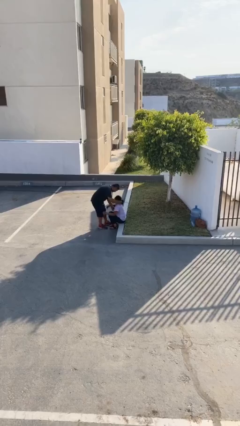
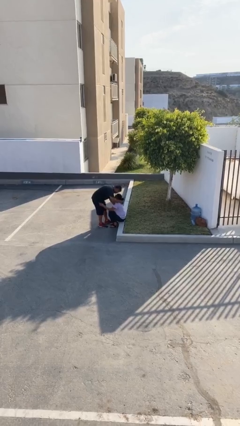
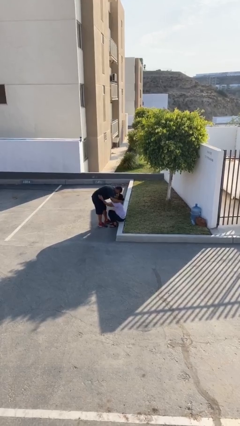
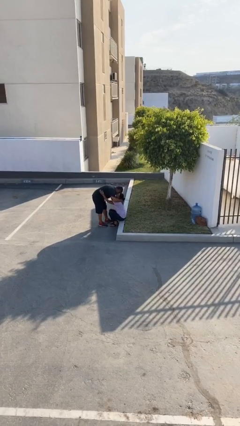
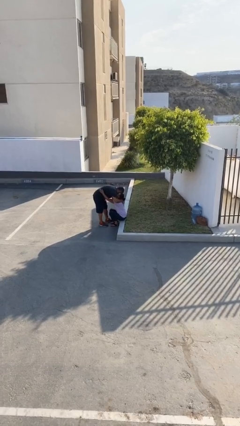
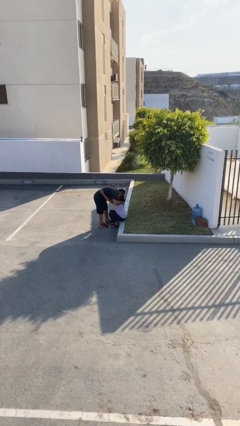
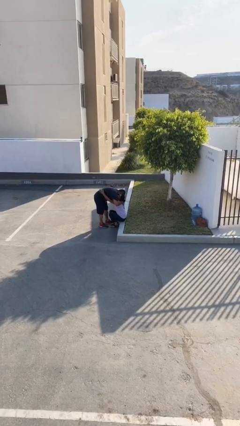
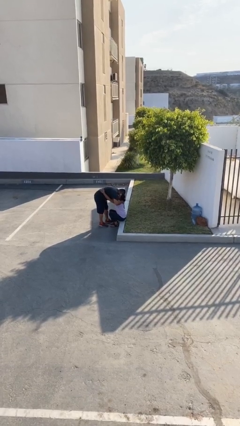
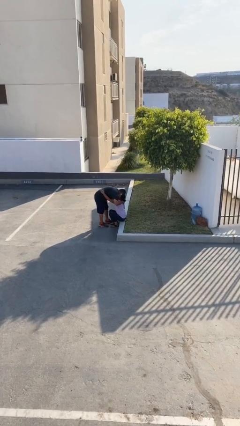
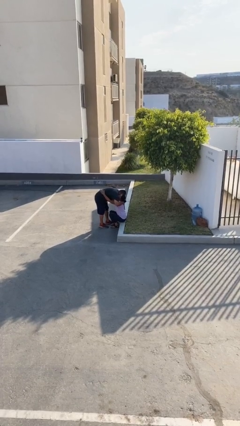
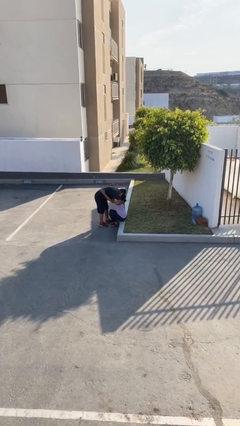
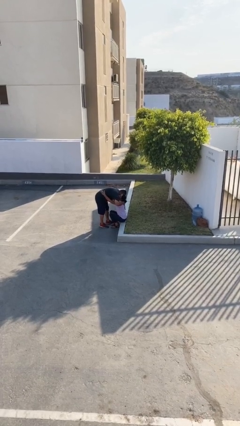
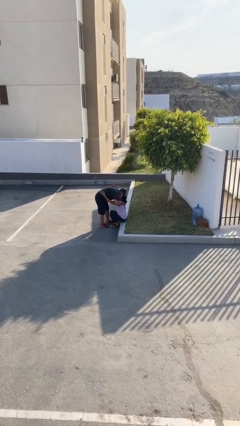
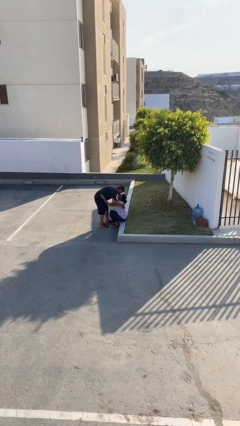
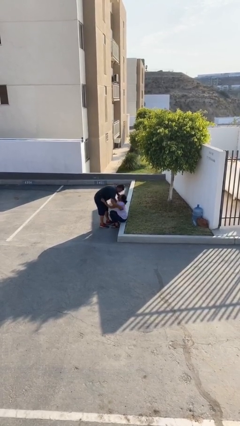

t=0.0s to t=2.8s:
person embraces person

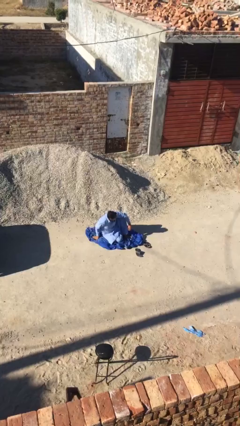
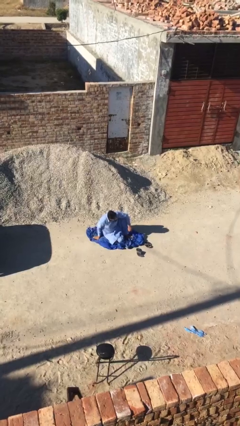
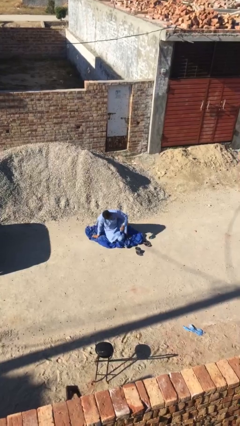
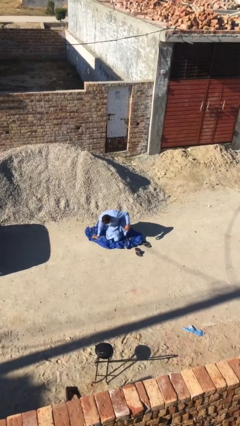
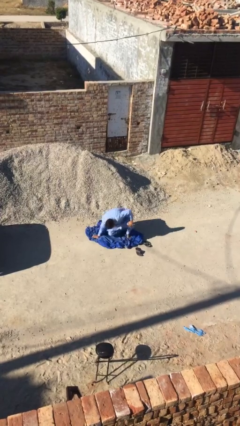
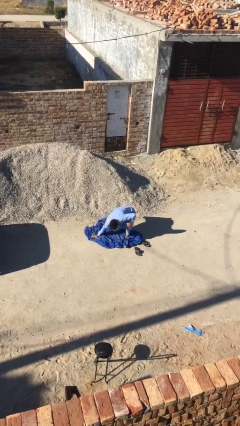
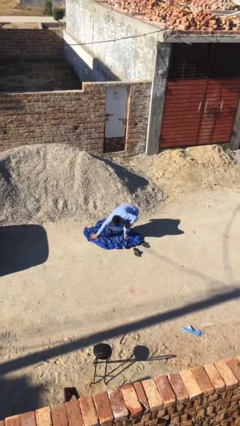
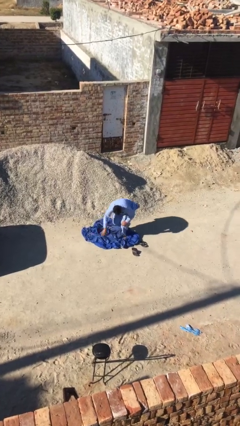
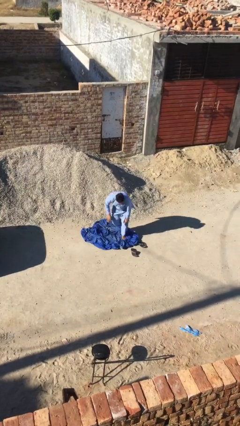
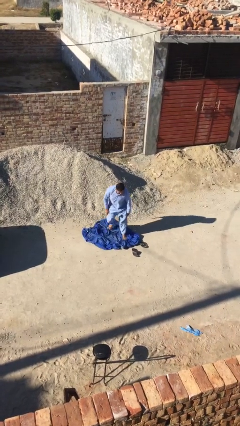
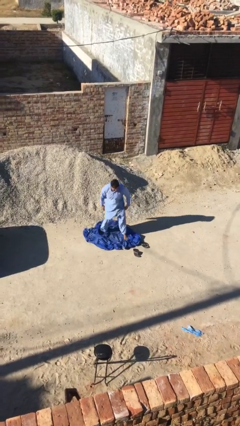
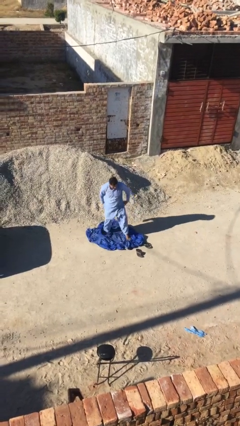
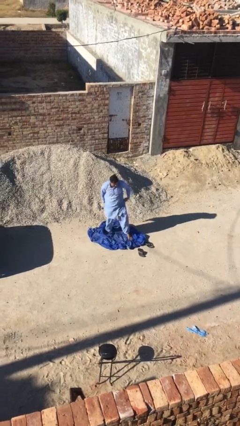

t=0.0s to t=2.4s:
person stands up

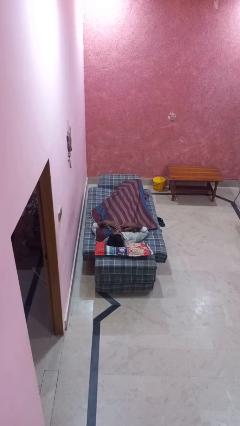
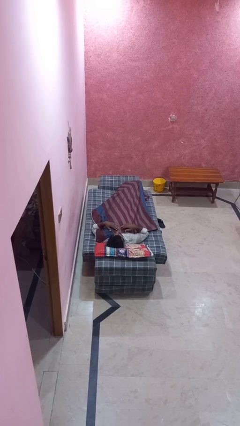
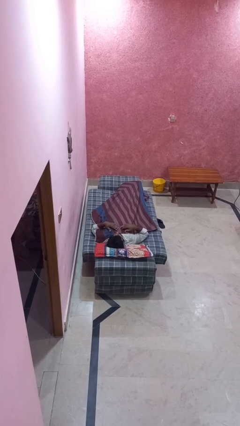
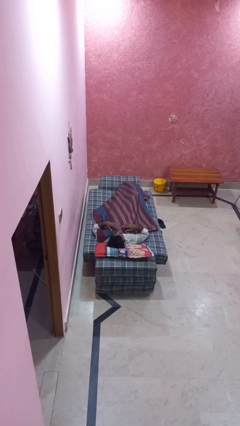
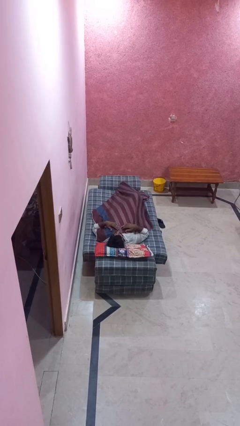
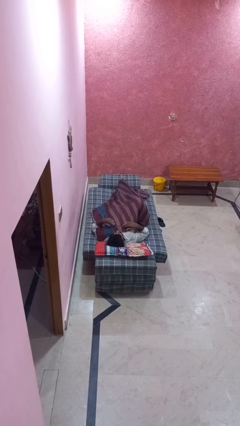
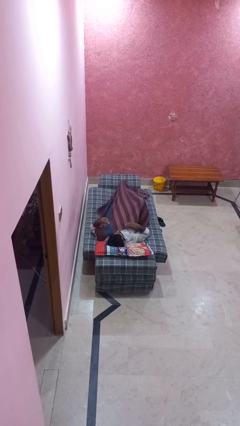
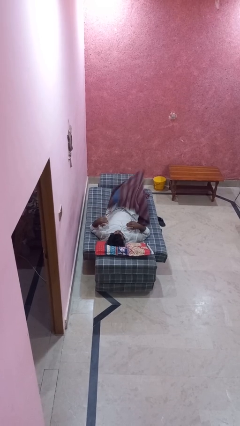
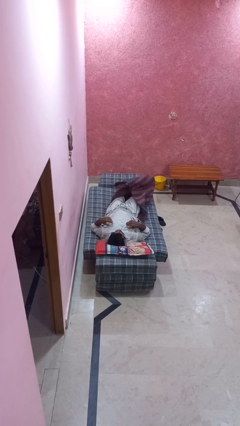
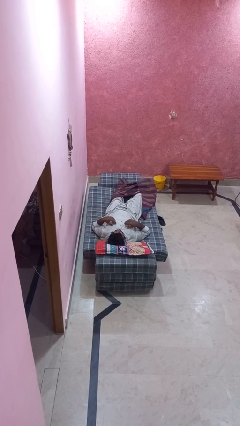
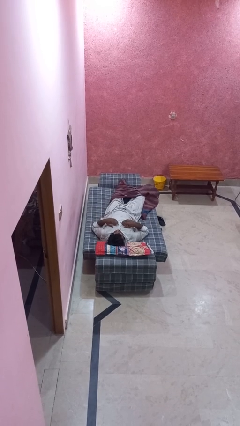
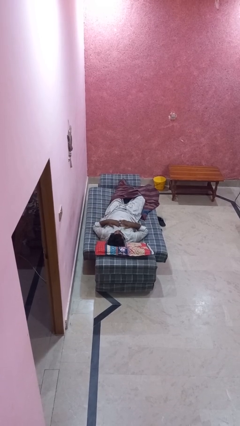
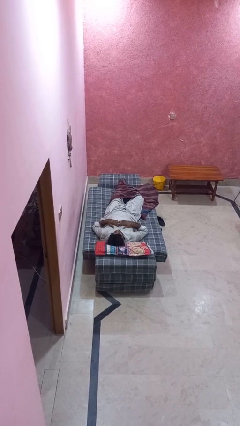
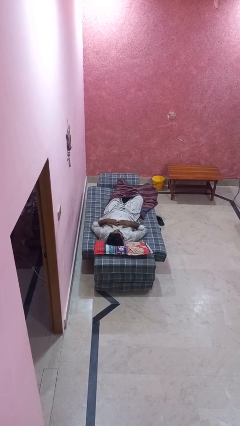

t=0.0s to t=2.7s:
person uncovers with bedsheets

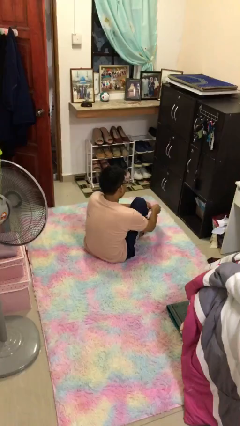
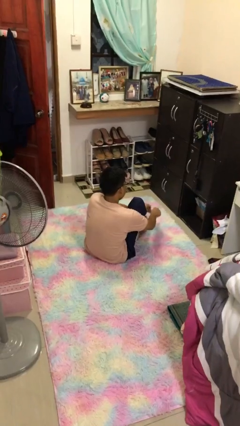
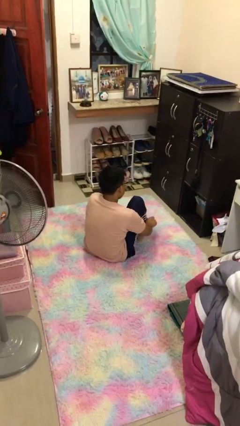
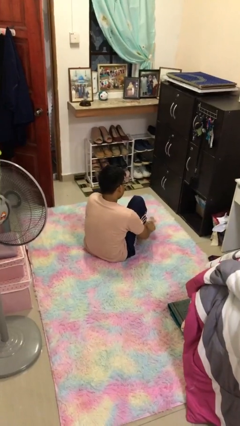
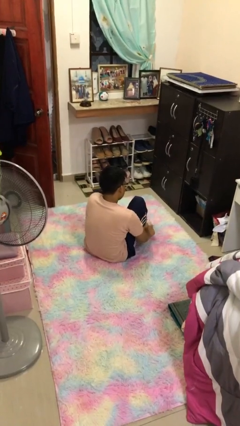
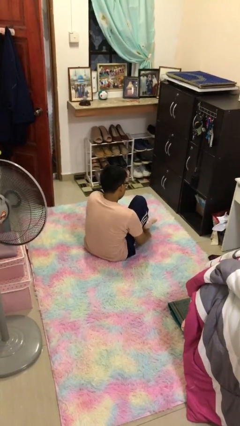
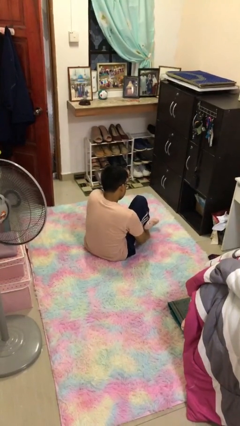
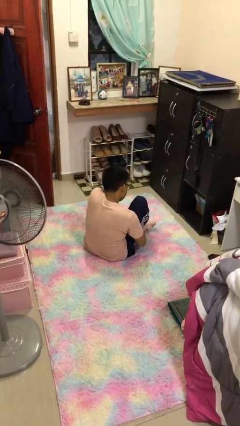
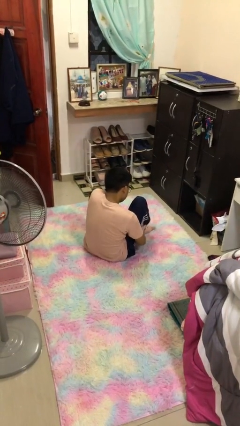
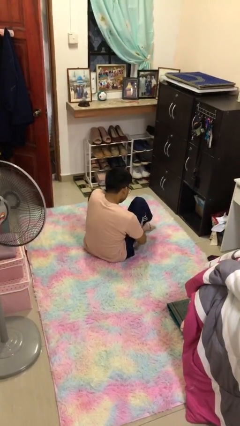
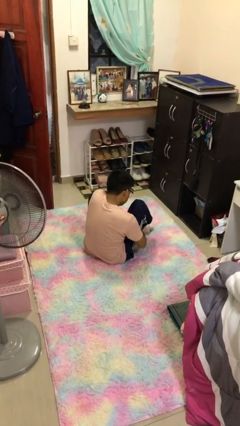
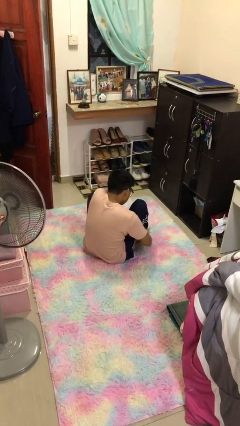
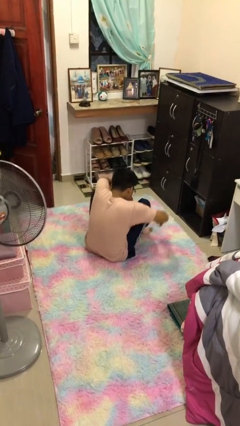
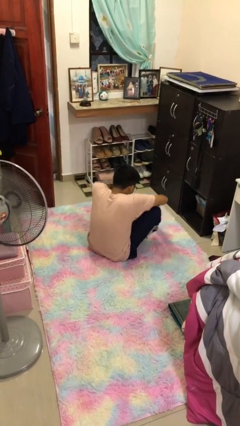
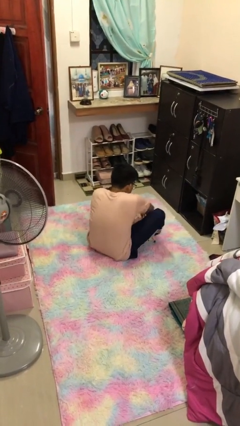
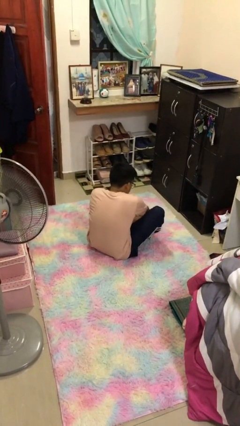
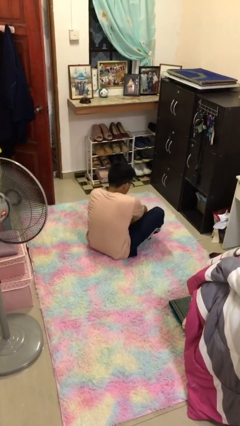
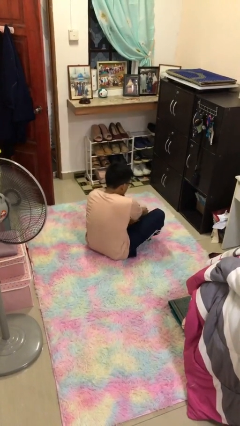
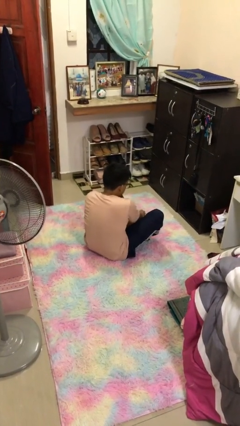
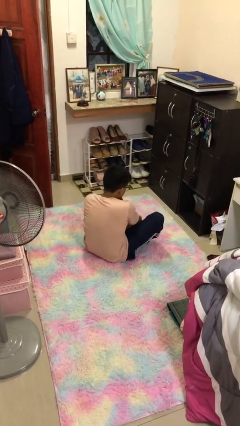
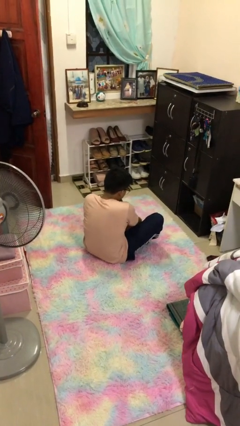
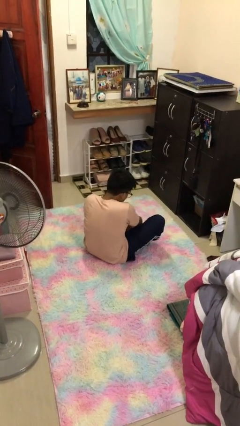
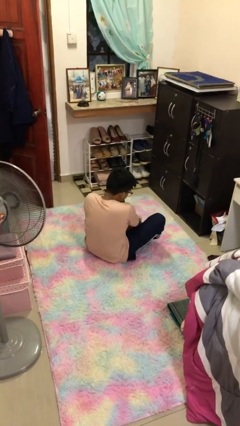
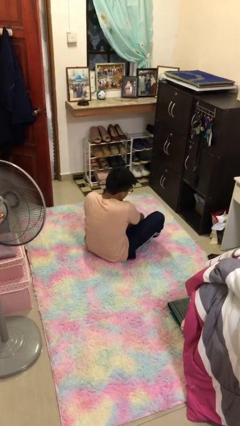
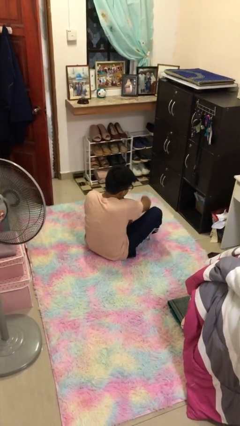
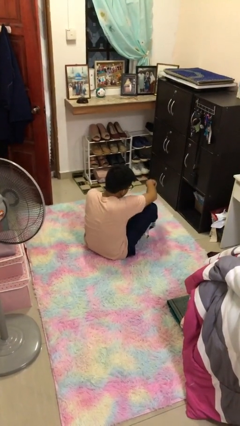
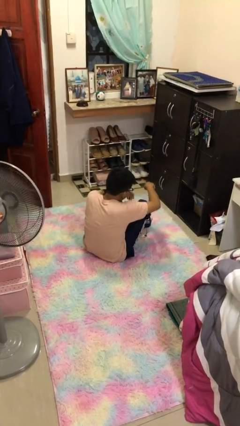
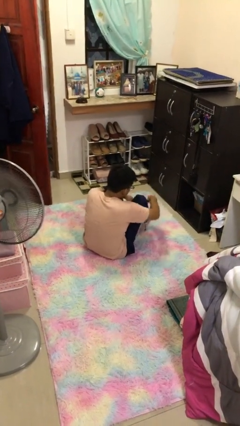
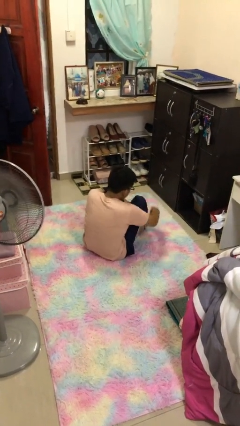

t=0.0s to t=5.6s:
person puts on socks

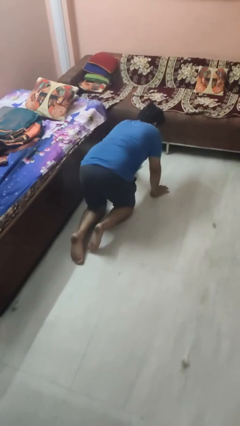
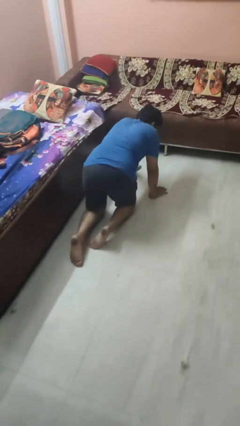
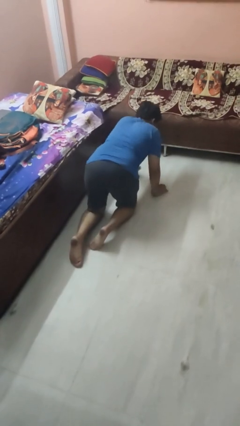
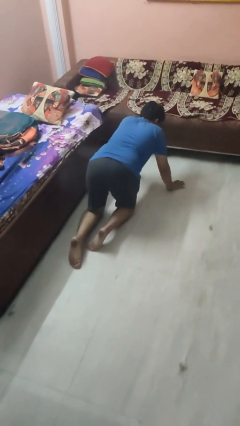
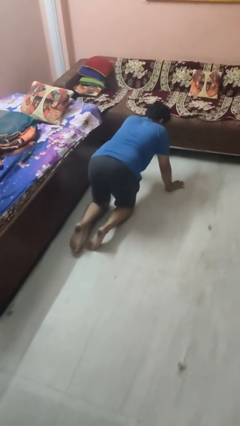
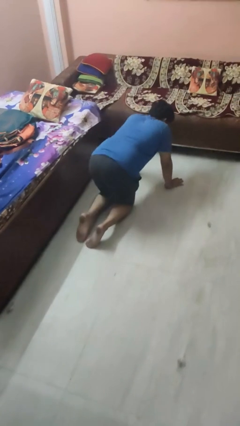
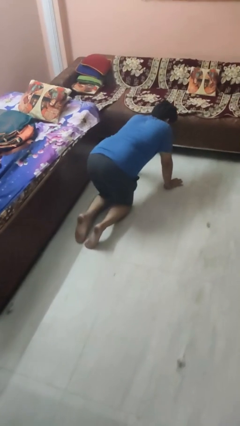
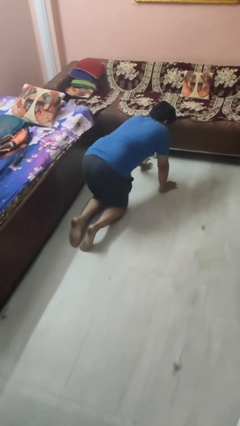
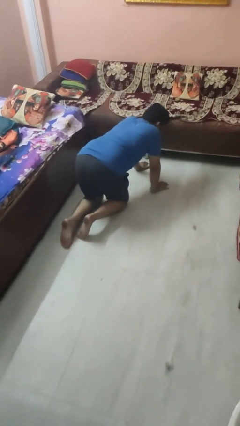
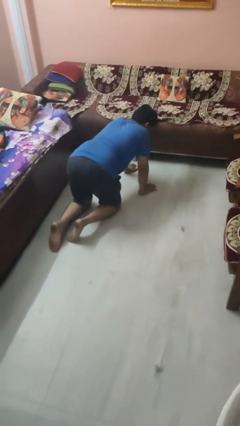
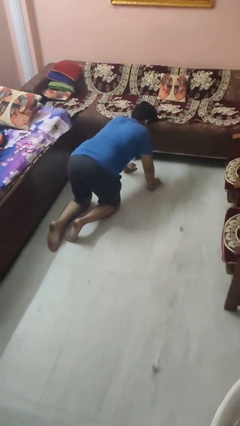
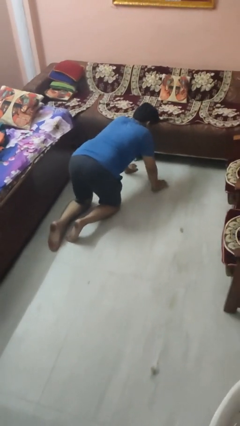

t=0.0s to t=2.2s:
person crawls

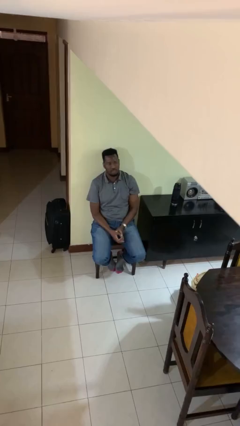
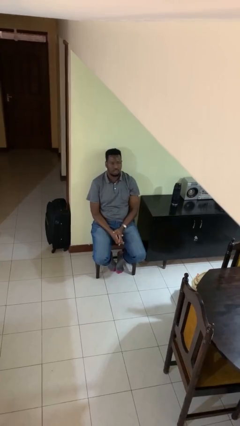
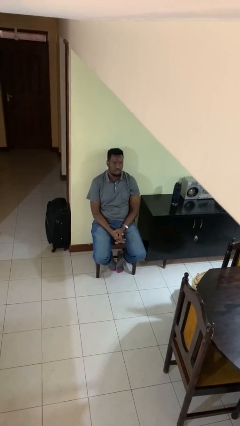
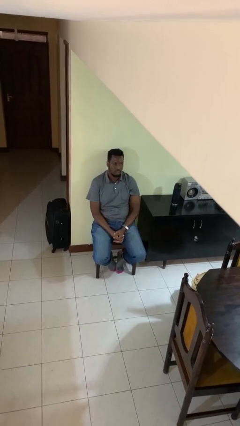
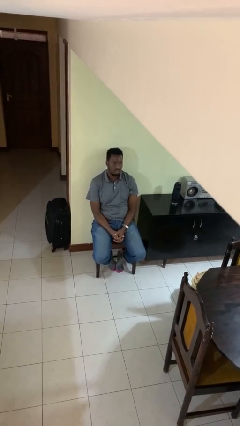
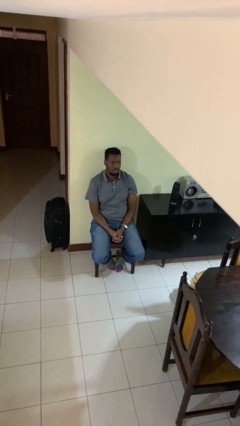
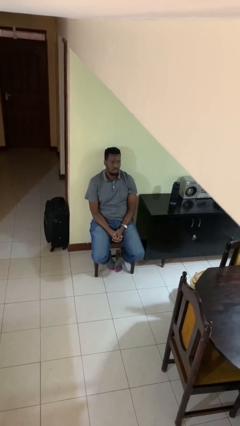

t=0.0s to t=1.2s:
person gestures swipe right

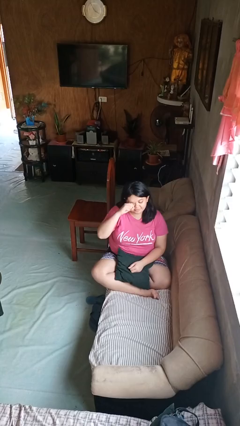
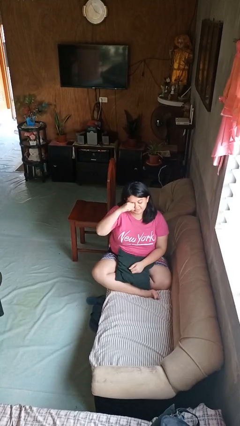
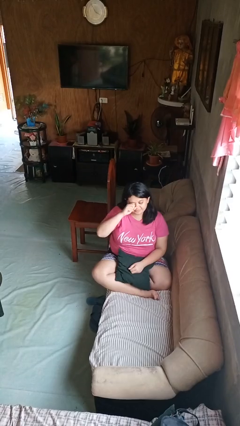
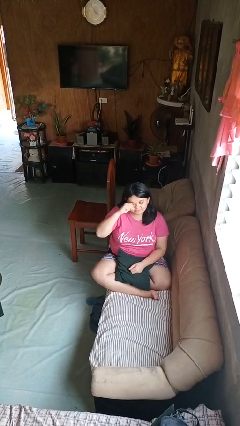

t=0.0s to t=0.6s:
person rubs eyes
